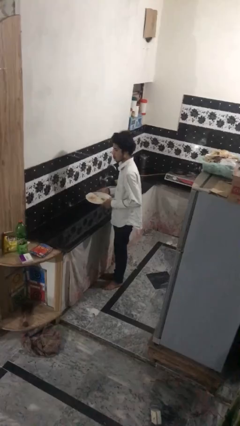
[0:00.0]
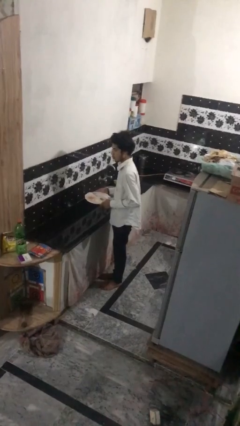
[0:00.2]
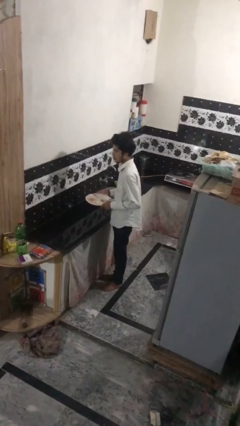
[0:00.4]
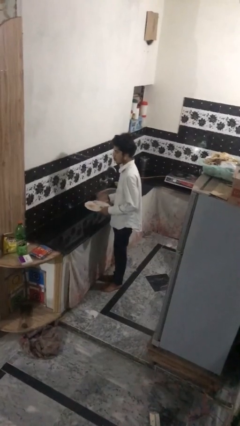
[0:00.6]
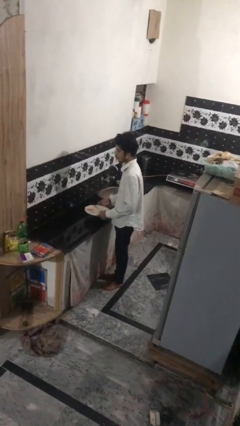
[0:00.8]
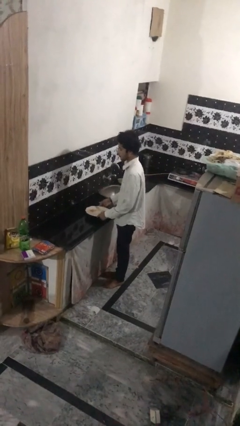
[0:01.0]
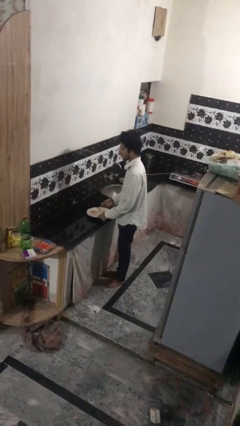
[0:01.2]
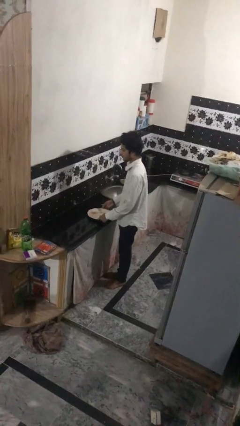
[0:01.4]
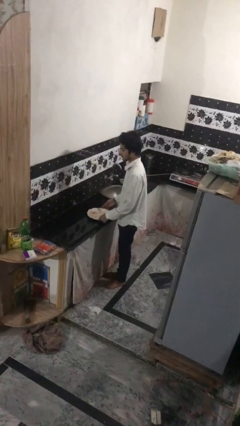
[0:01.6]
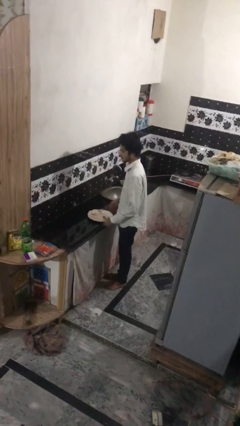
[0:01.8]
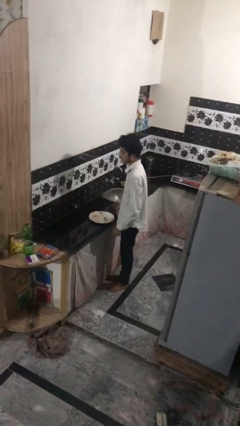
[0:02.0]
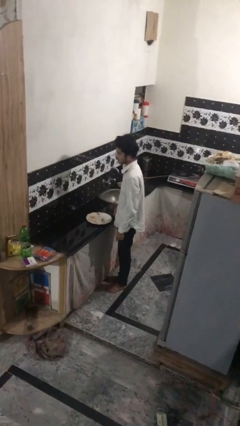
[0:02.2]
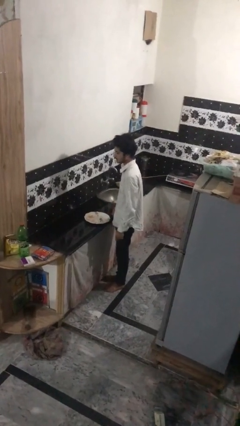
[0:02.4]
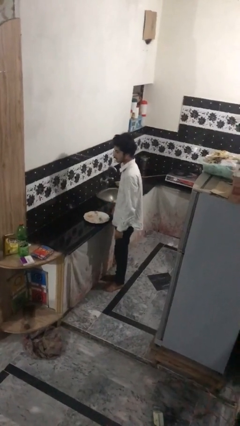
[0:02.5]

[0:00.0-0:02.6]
person puts down object on countertop

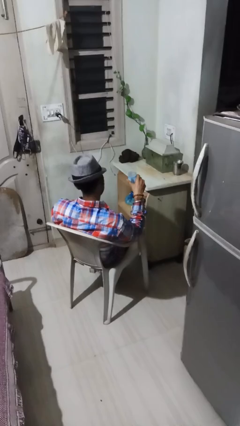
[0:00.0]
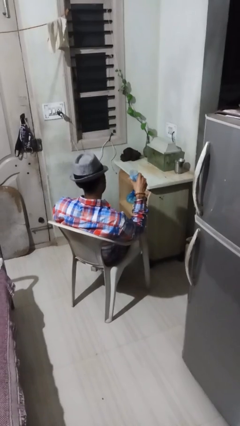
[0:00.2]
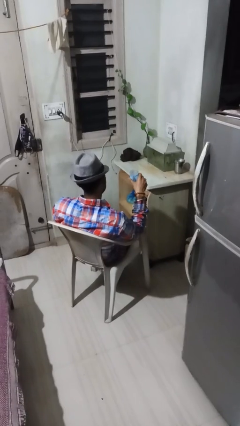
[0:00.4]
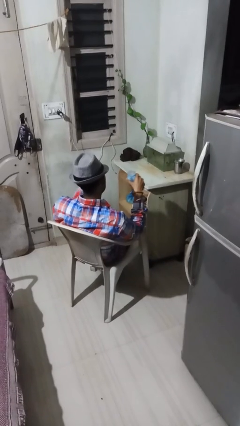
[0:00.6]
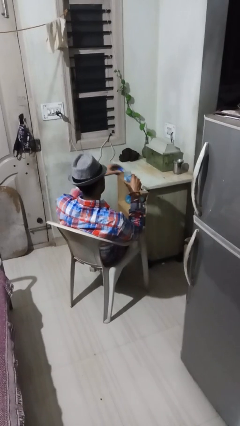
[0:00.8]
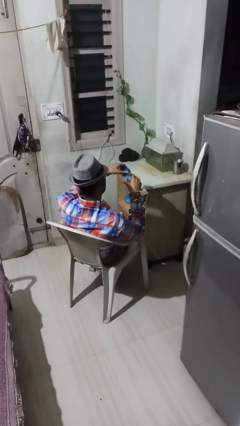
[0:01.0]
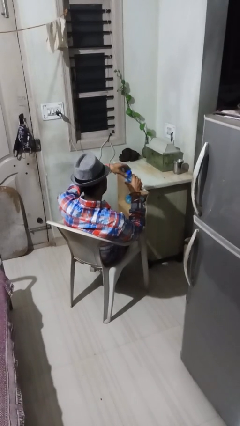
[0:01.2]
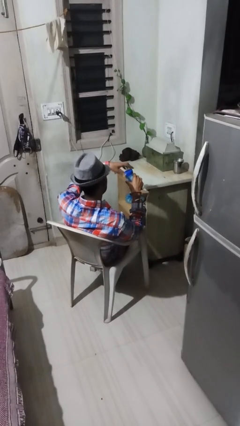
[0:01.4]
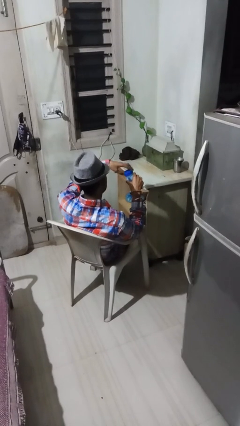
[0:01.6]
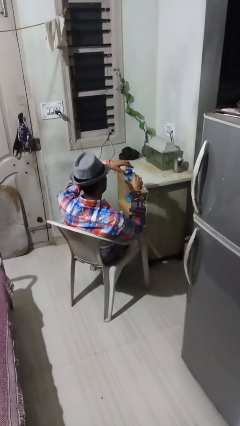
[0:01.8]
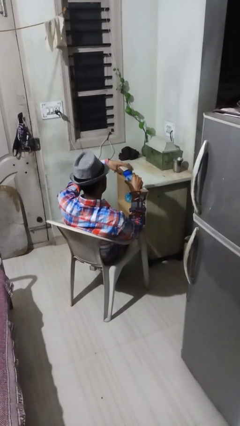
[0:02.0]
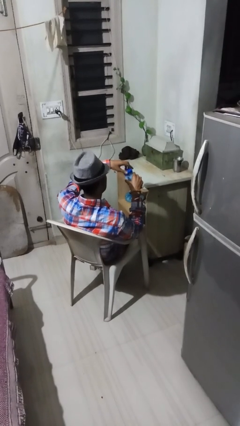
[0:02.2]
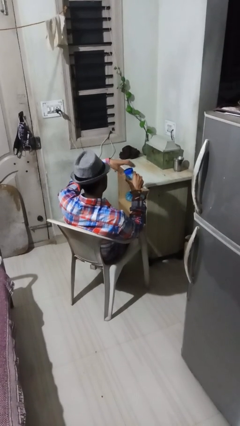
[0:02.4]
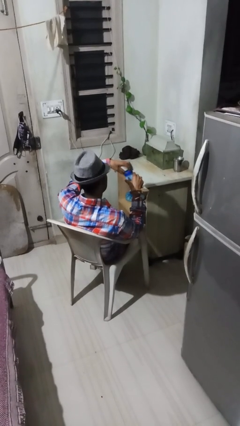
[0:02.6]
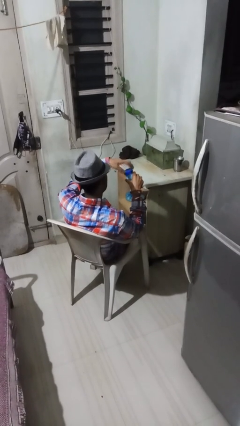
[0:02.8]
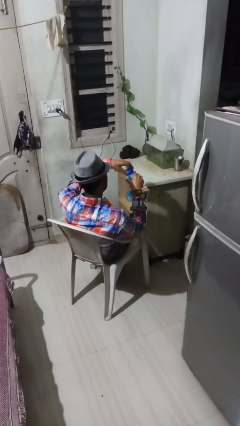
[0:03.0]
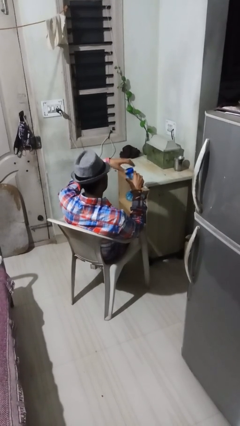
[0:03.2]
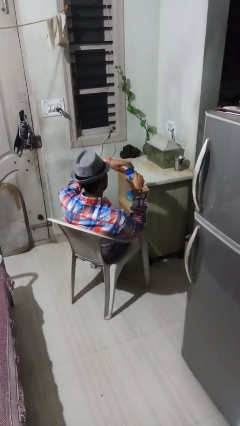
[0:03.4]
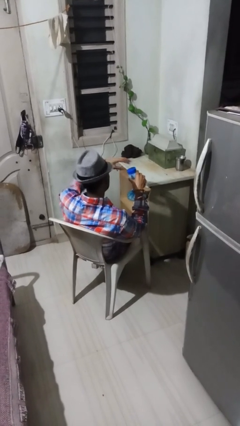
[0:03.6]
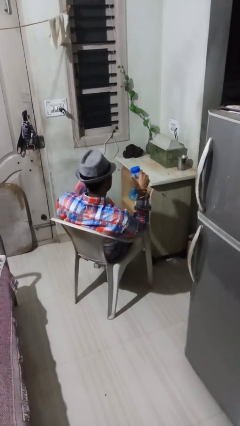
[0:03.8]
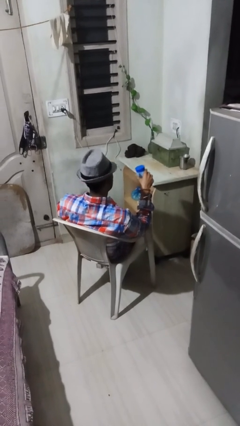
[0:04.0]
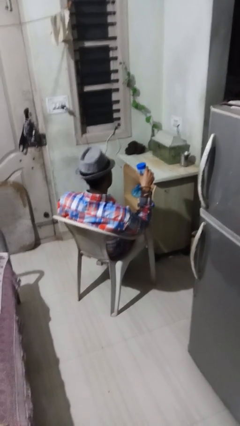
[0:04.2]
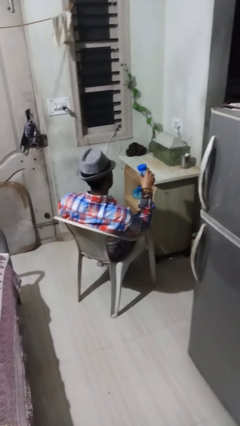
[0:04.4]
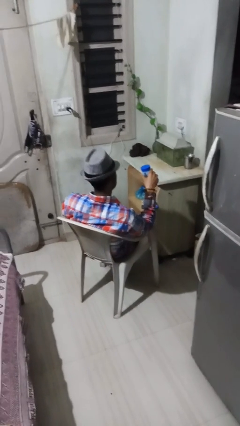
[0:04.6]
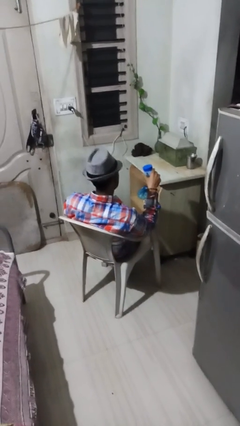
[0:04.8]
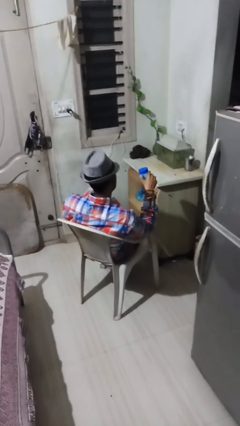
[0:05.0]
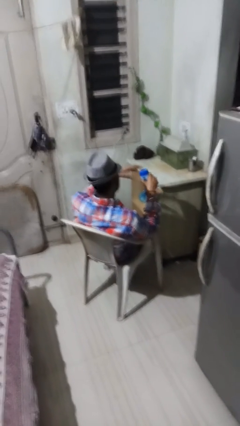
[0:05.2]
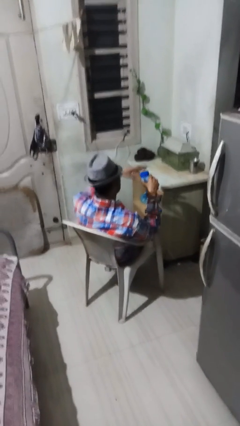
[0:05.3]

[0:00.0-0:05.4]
person closes jar

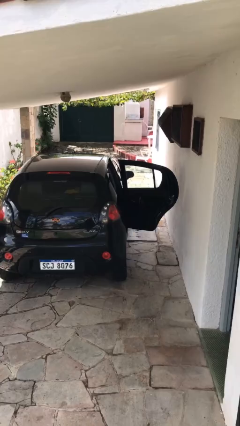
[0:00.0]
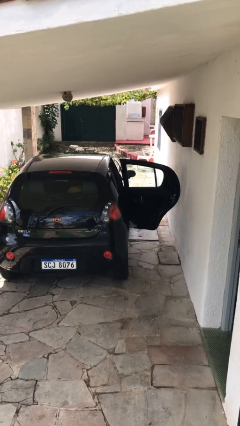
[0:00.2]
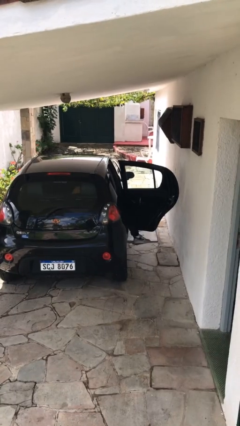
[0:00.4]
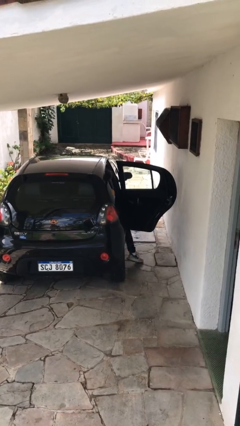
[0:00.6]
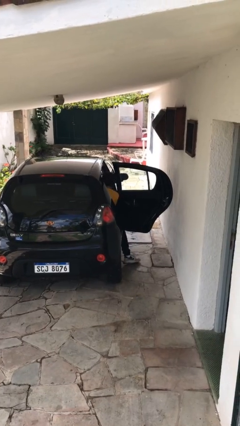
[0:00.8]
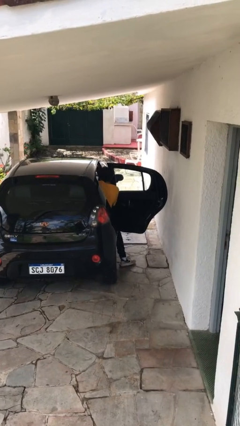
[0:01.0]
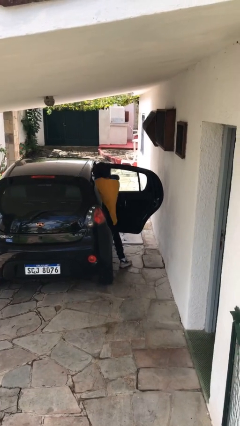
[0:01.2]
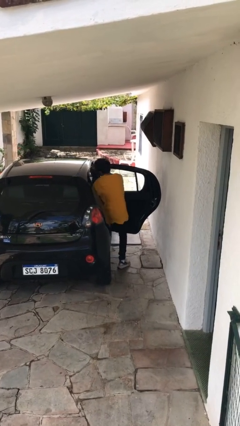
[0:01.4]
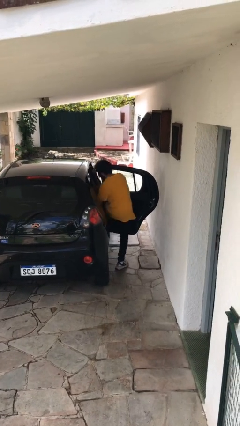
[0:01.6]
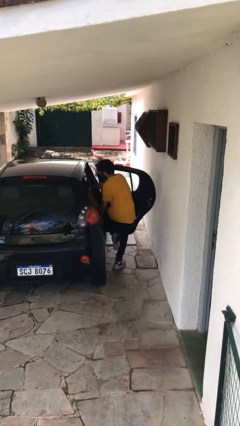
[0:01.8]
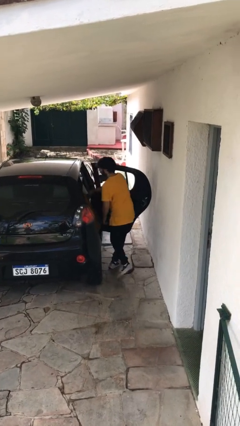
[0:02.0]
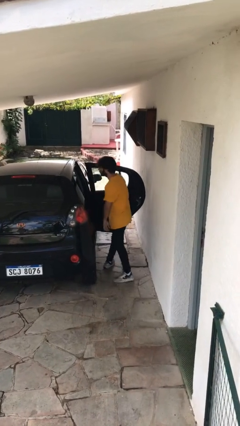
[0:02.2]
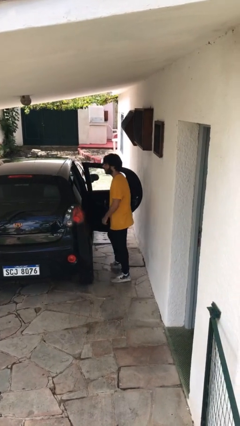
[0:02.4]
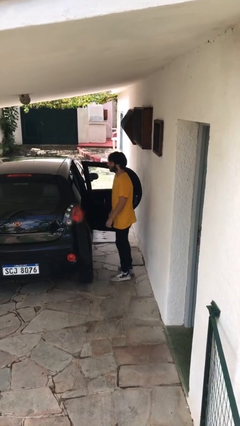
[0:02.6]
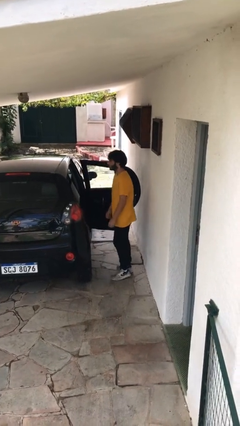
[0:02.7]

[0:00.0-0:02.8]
person exits car

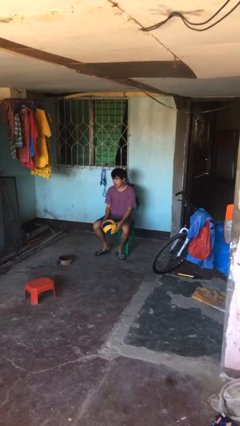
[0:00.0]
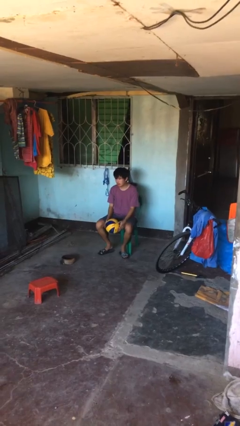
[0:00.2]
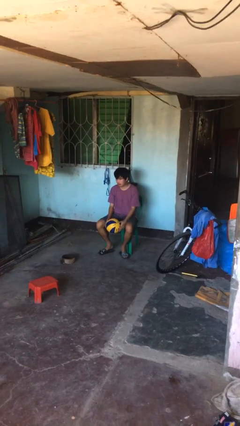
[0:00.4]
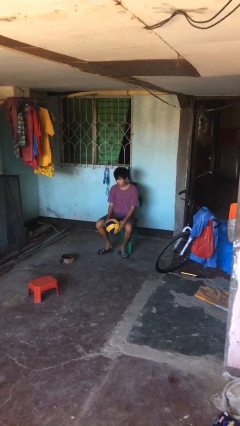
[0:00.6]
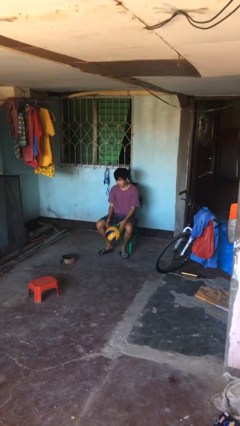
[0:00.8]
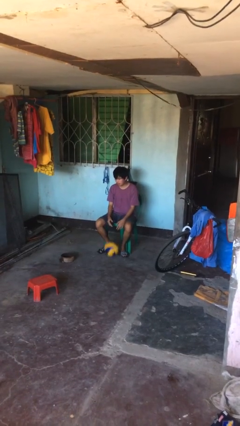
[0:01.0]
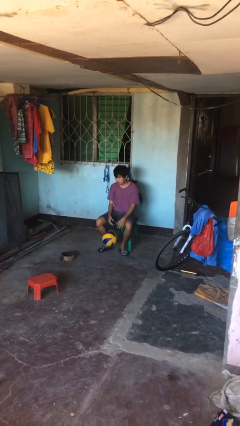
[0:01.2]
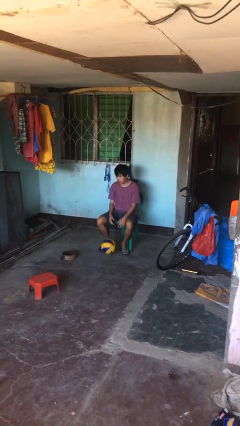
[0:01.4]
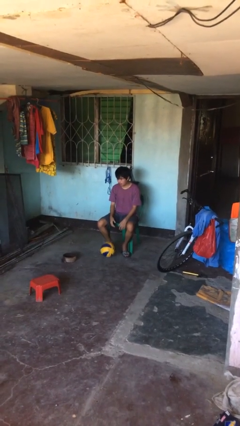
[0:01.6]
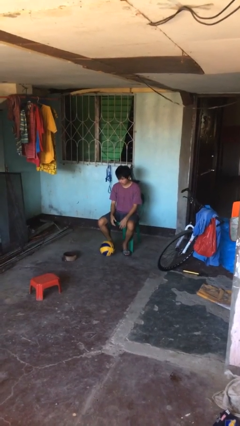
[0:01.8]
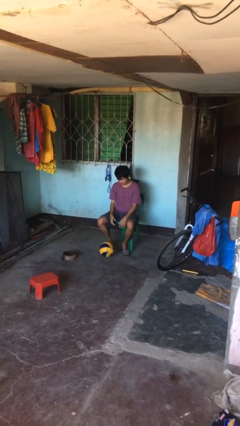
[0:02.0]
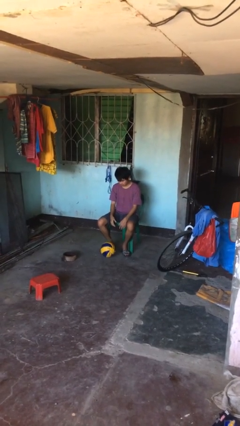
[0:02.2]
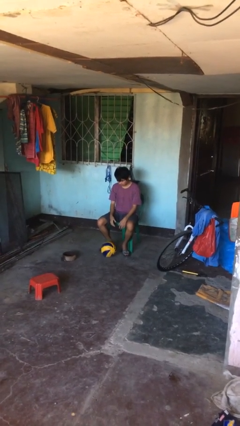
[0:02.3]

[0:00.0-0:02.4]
person drops object

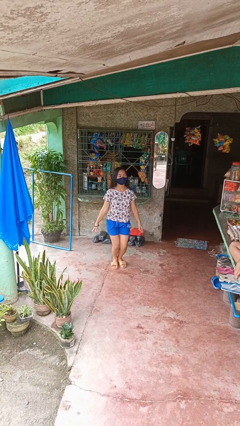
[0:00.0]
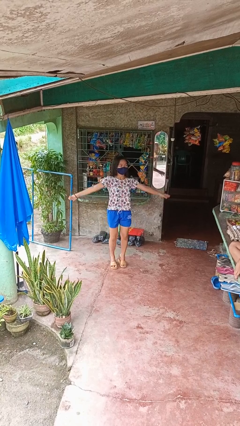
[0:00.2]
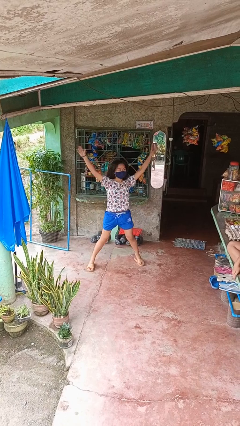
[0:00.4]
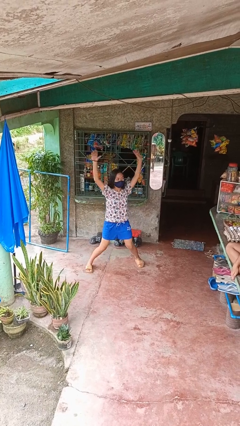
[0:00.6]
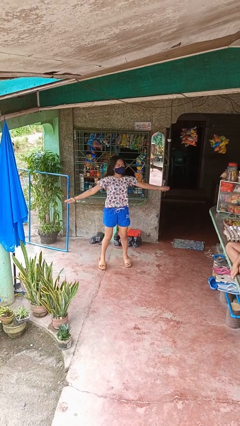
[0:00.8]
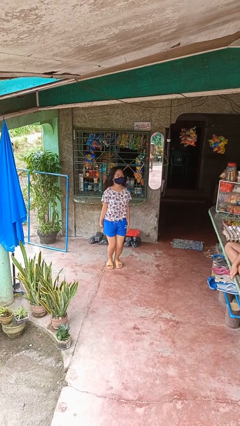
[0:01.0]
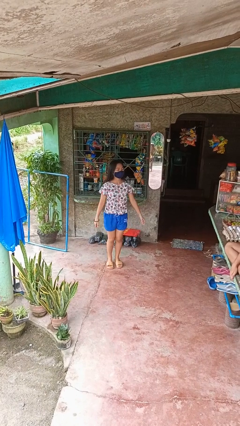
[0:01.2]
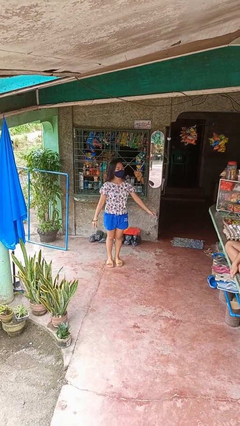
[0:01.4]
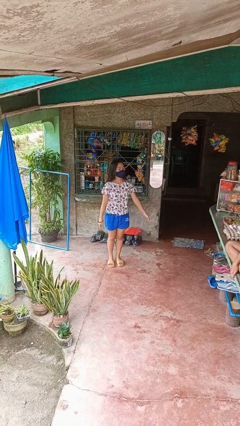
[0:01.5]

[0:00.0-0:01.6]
person exercises with jumping jacks

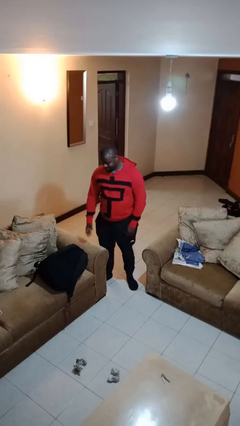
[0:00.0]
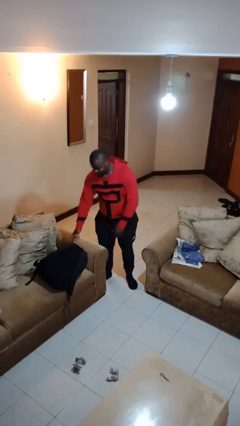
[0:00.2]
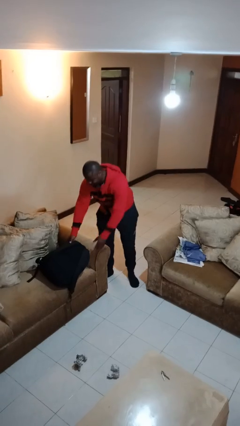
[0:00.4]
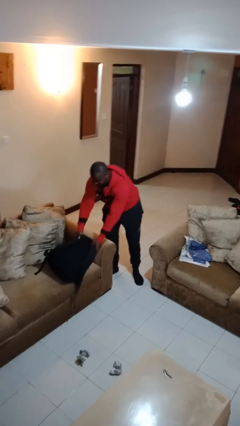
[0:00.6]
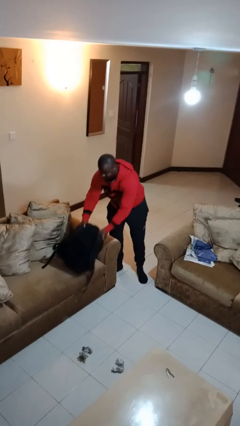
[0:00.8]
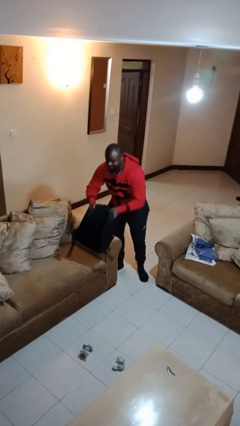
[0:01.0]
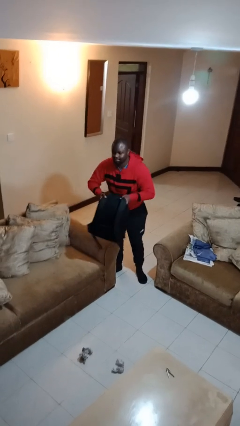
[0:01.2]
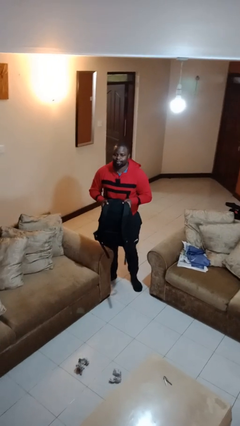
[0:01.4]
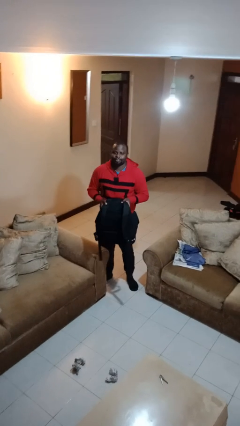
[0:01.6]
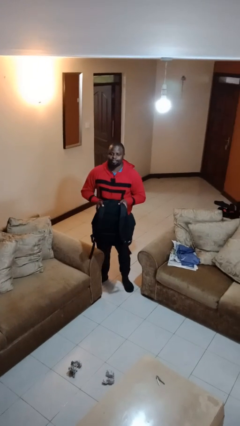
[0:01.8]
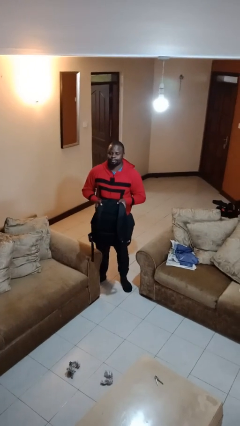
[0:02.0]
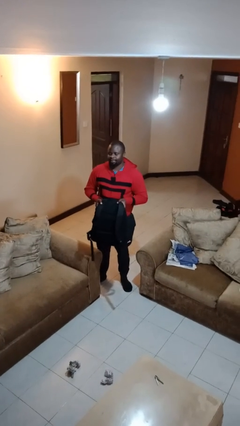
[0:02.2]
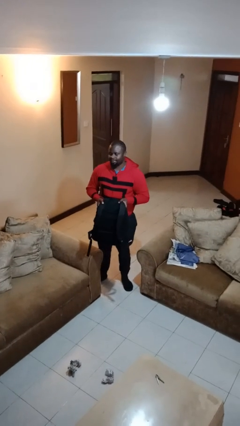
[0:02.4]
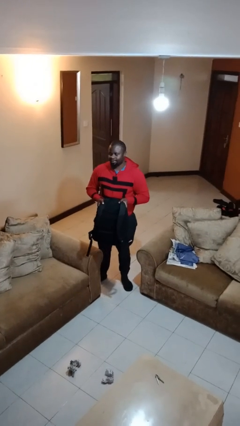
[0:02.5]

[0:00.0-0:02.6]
person picks up object from couch
